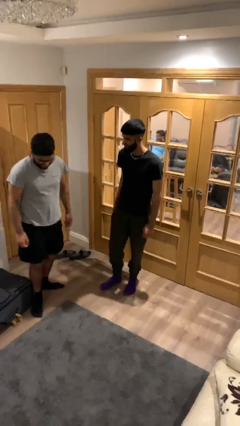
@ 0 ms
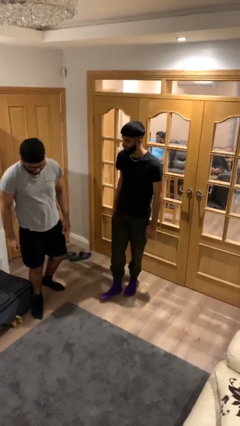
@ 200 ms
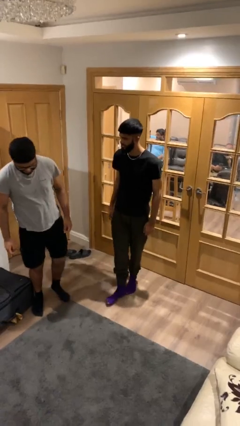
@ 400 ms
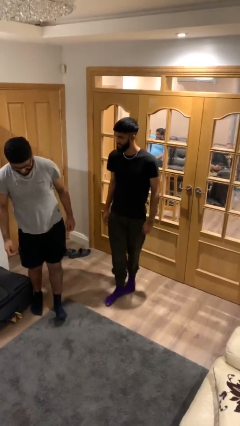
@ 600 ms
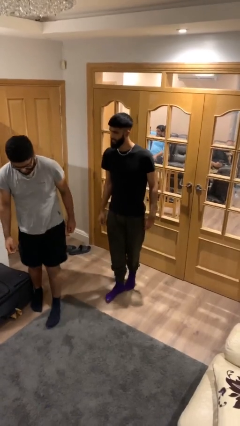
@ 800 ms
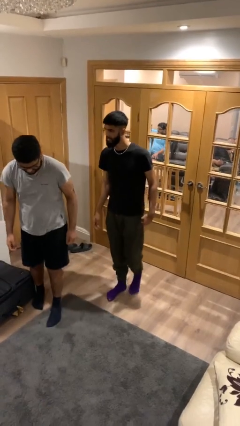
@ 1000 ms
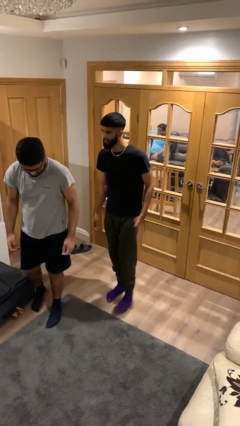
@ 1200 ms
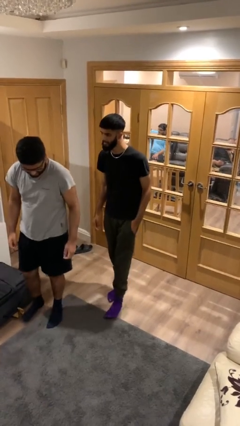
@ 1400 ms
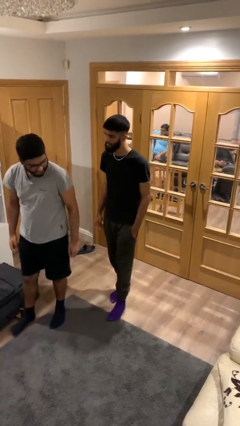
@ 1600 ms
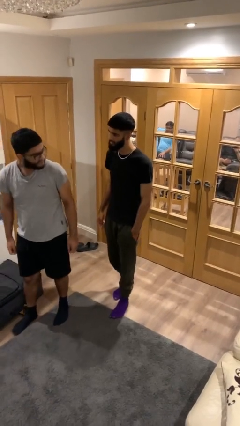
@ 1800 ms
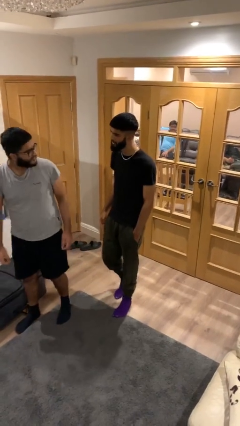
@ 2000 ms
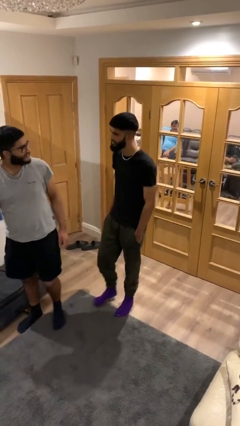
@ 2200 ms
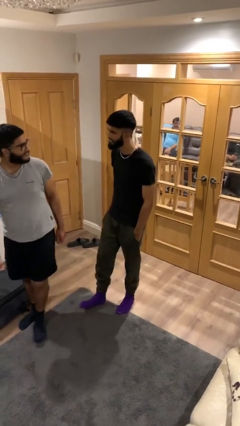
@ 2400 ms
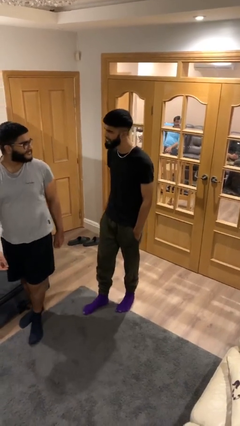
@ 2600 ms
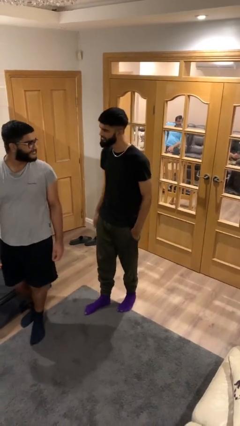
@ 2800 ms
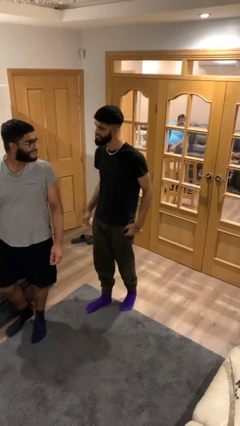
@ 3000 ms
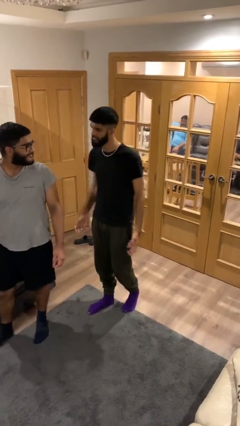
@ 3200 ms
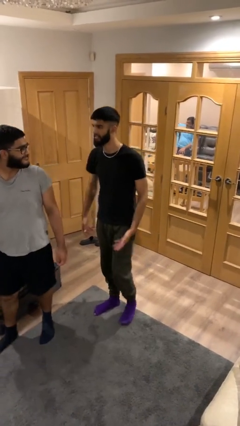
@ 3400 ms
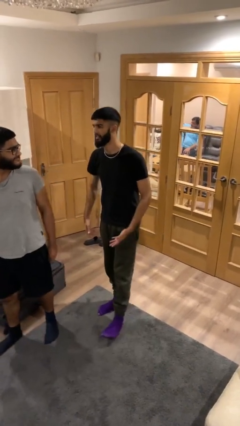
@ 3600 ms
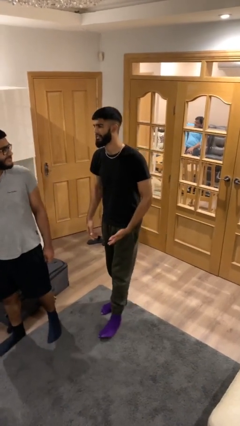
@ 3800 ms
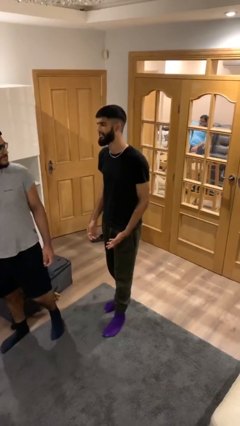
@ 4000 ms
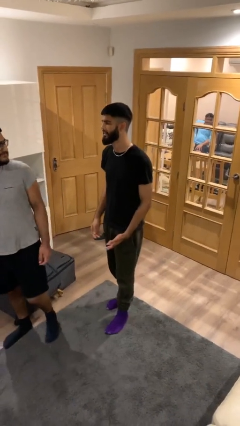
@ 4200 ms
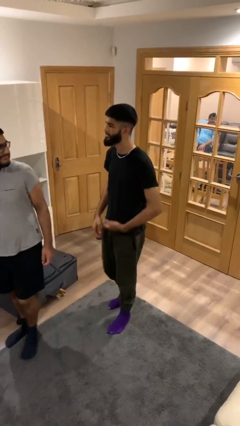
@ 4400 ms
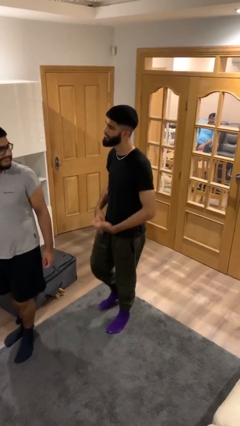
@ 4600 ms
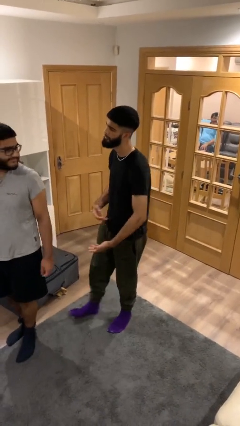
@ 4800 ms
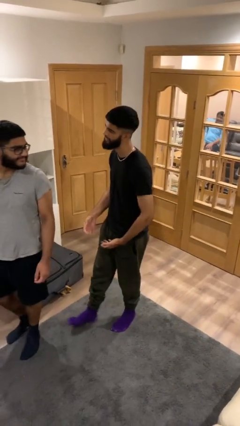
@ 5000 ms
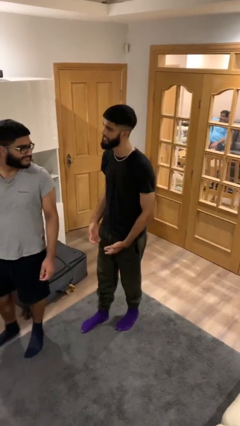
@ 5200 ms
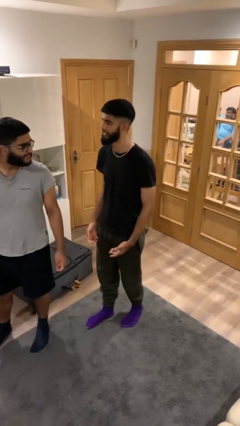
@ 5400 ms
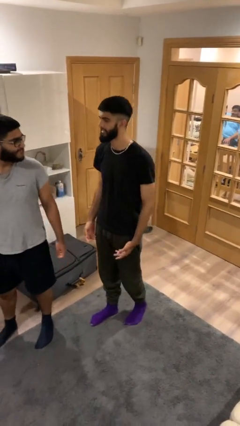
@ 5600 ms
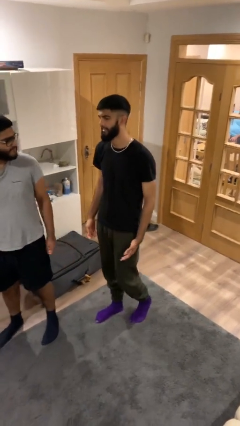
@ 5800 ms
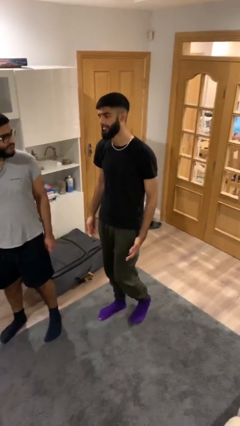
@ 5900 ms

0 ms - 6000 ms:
person talks to person

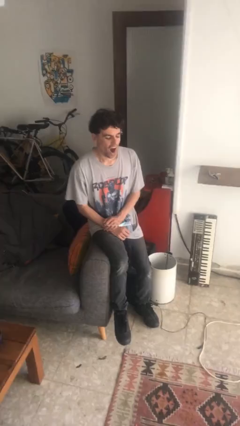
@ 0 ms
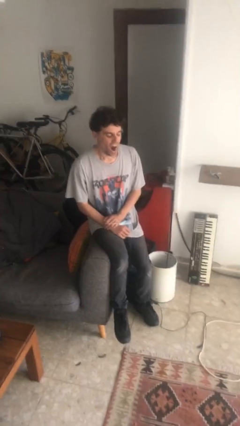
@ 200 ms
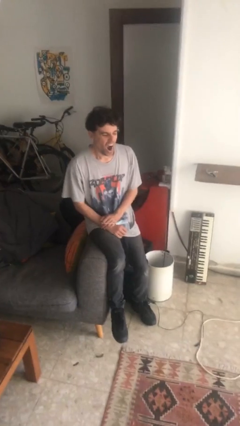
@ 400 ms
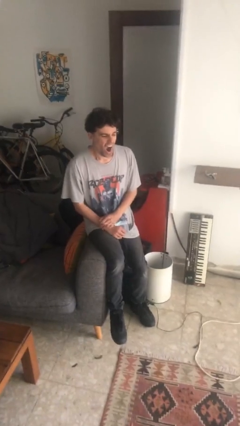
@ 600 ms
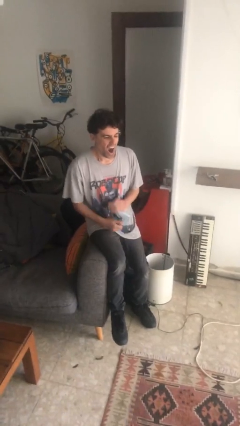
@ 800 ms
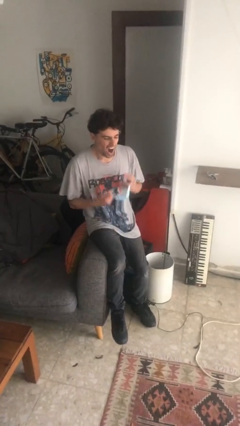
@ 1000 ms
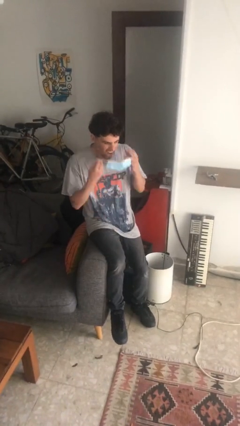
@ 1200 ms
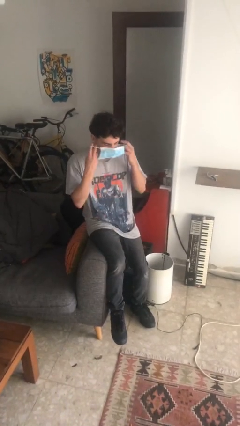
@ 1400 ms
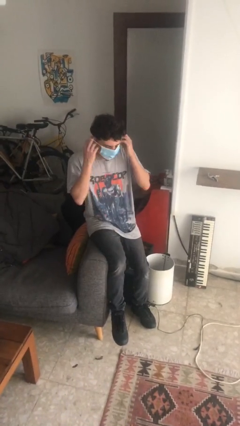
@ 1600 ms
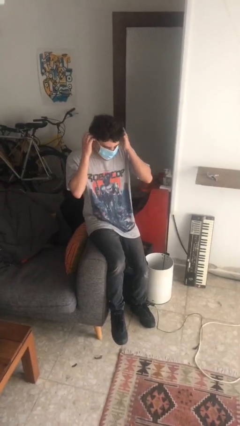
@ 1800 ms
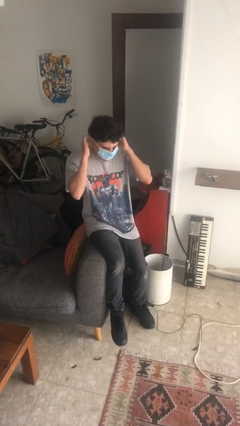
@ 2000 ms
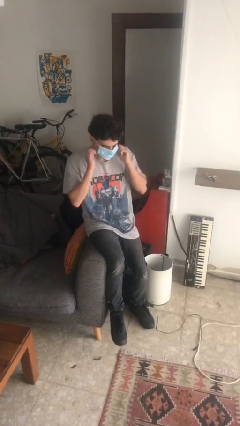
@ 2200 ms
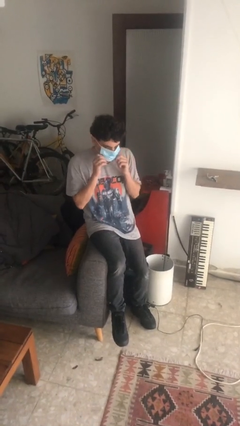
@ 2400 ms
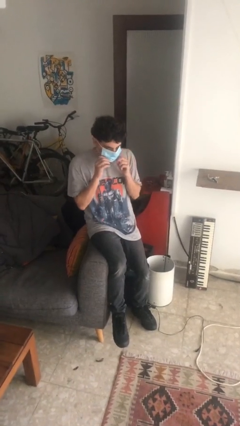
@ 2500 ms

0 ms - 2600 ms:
person puts on facemask

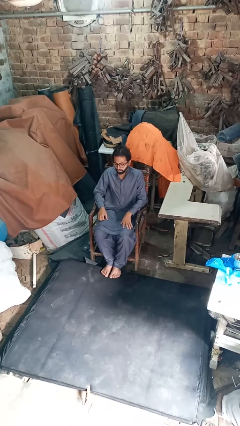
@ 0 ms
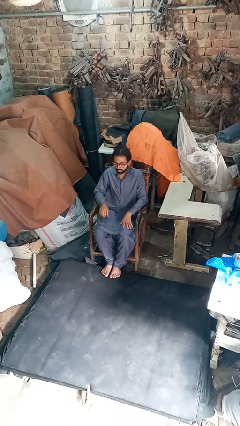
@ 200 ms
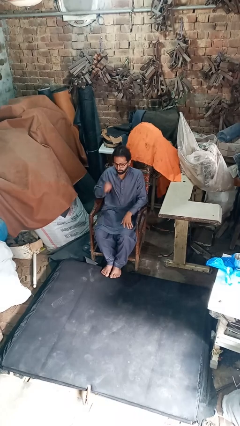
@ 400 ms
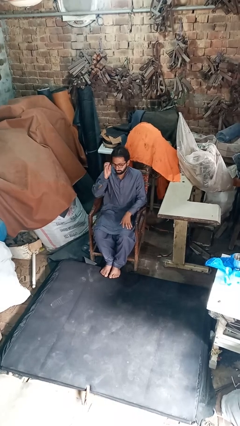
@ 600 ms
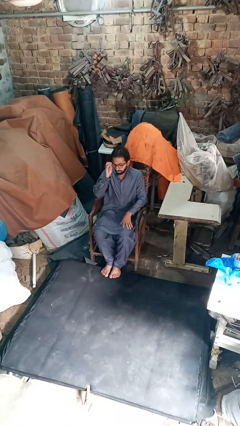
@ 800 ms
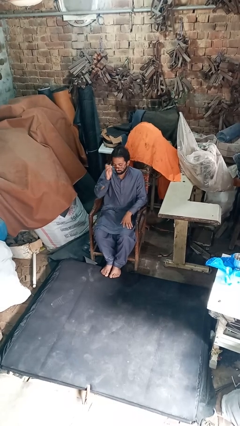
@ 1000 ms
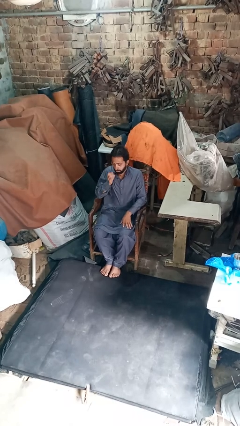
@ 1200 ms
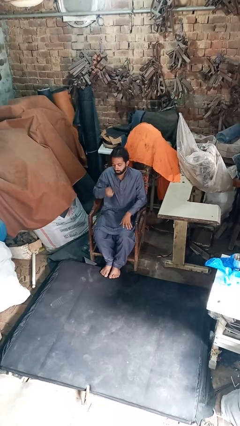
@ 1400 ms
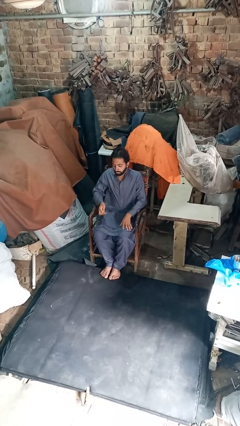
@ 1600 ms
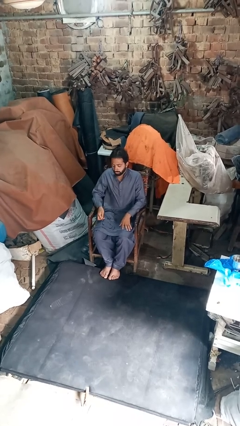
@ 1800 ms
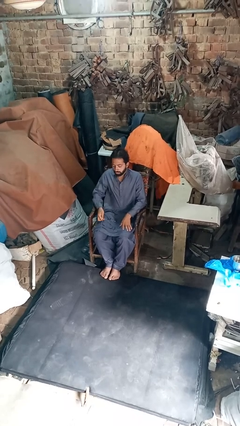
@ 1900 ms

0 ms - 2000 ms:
person takes off glasses

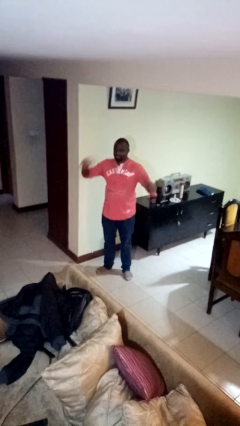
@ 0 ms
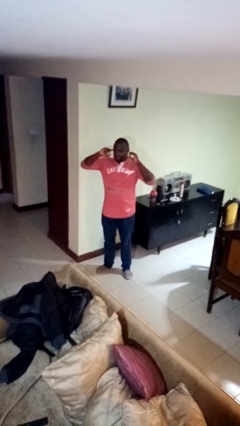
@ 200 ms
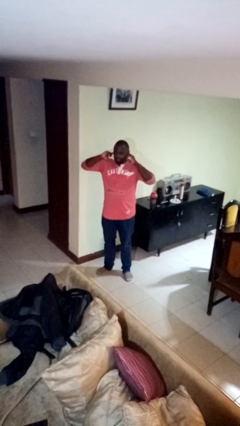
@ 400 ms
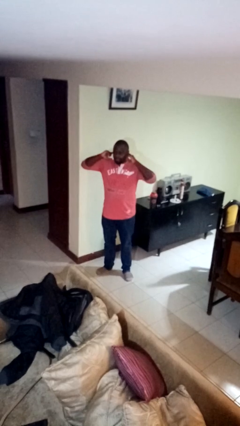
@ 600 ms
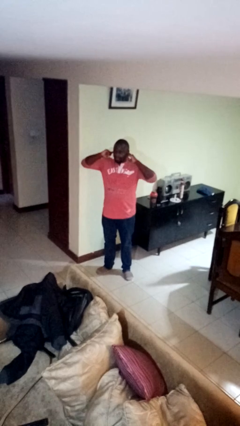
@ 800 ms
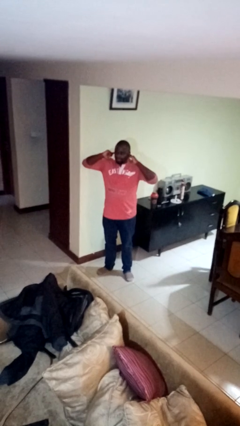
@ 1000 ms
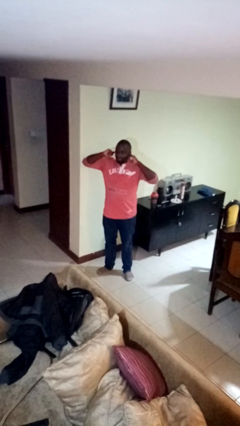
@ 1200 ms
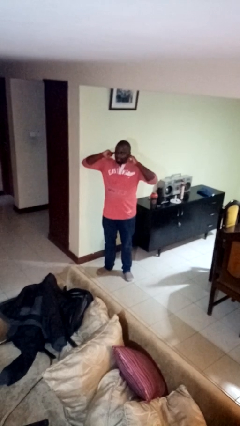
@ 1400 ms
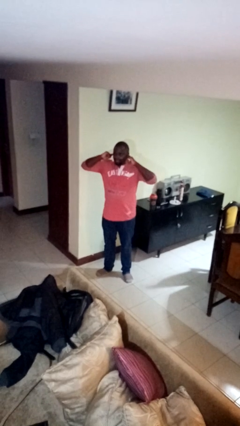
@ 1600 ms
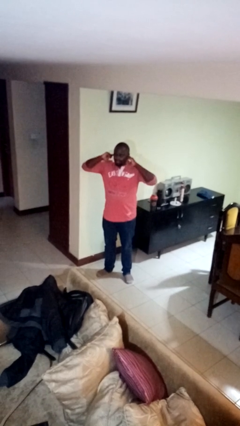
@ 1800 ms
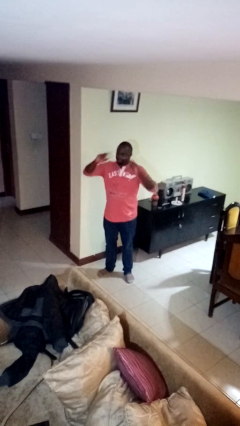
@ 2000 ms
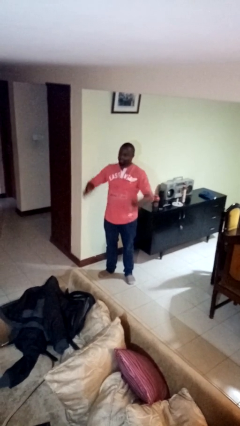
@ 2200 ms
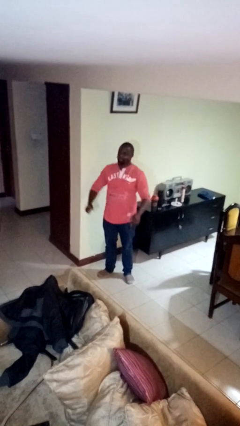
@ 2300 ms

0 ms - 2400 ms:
person puts fingers in ear

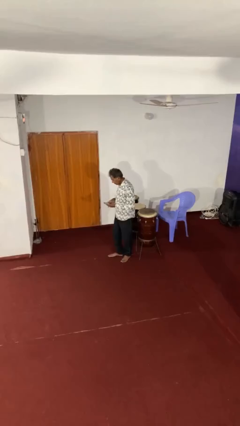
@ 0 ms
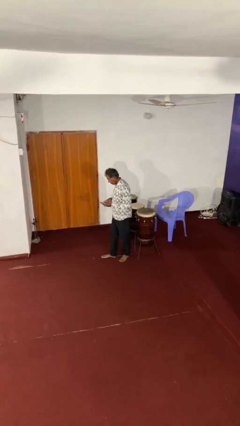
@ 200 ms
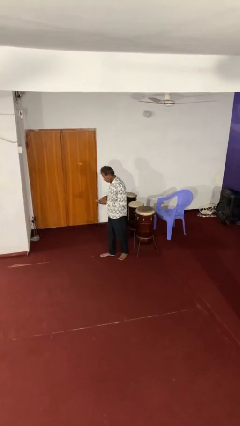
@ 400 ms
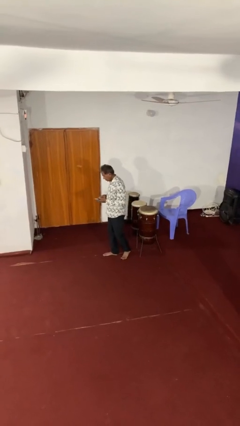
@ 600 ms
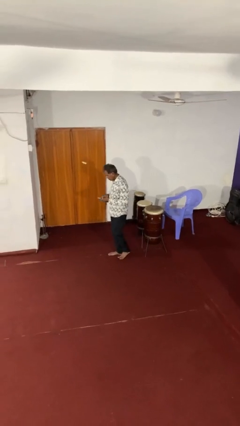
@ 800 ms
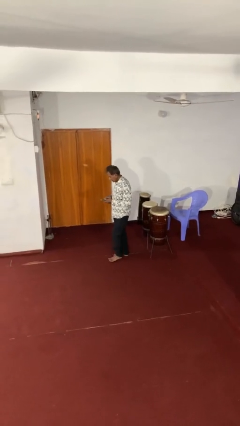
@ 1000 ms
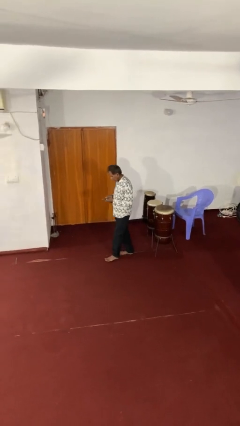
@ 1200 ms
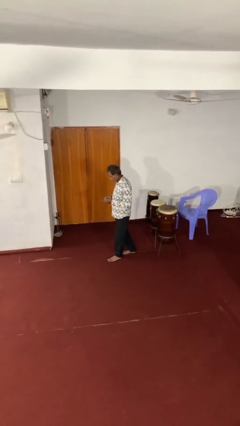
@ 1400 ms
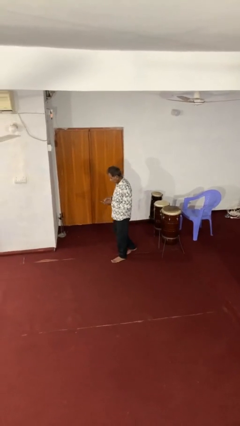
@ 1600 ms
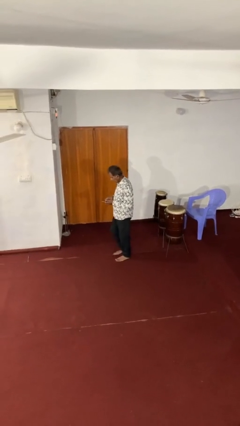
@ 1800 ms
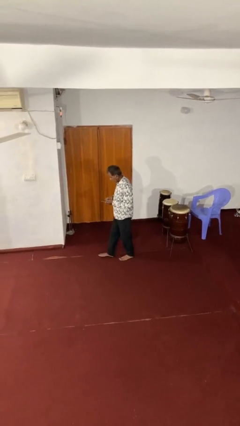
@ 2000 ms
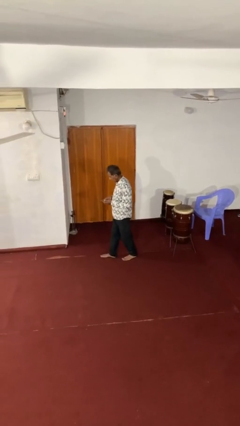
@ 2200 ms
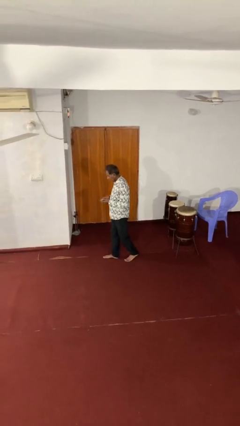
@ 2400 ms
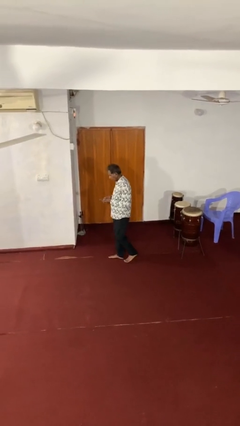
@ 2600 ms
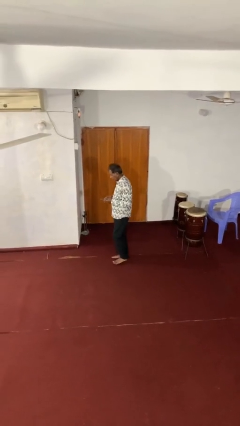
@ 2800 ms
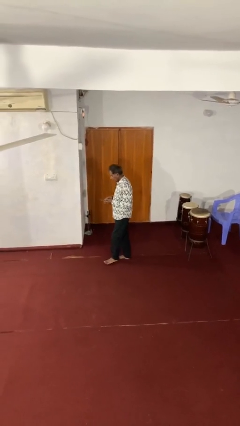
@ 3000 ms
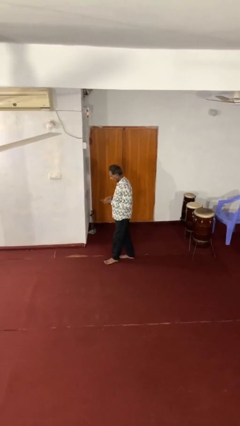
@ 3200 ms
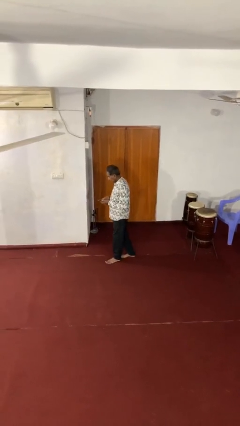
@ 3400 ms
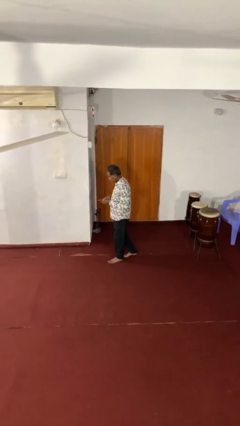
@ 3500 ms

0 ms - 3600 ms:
person texts on phone

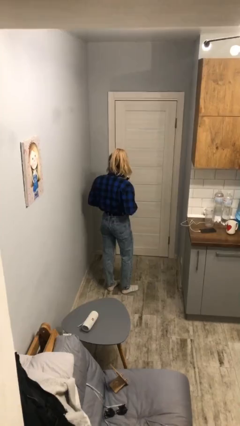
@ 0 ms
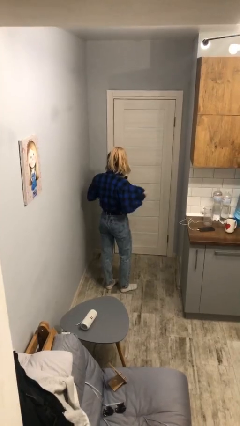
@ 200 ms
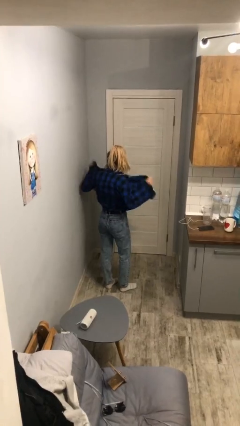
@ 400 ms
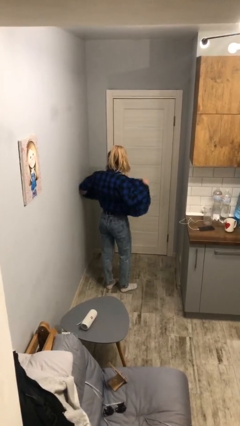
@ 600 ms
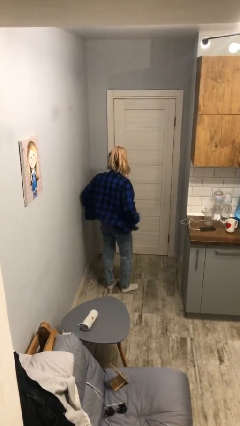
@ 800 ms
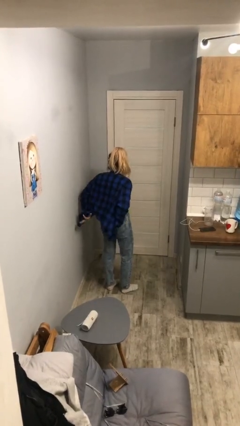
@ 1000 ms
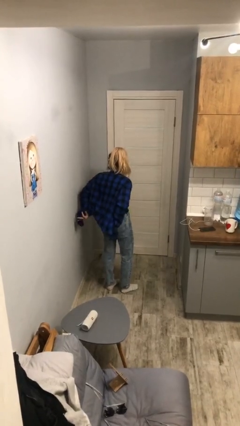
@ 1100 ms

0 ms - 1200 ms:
person untucks shirt
